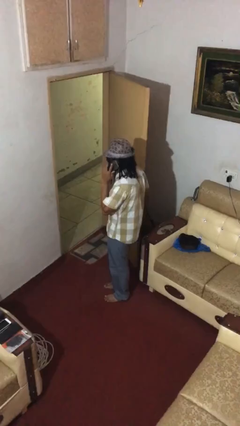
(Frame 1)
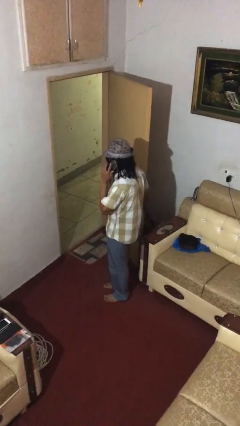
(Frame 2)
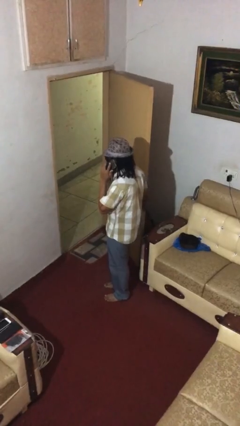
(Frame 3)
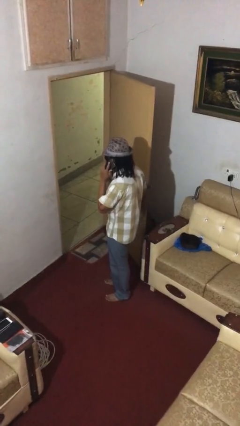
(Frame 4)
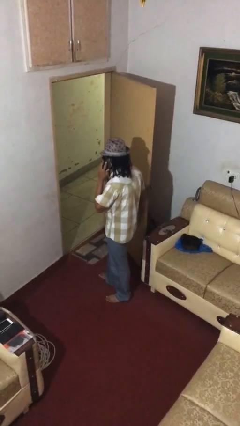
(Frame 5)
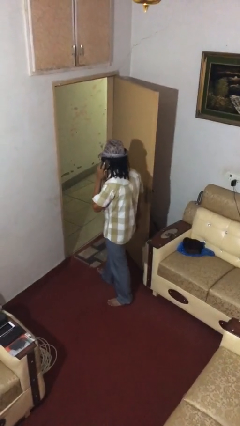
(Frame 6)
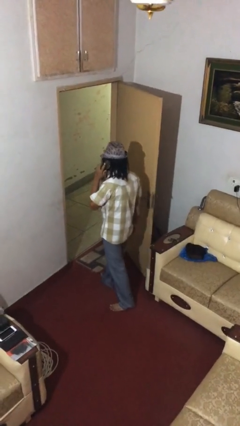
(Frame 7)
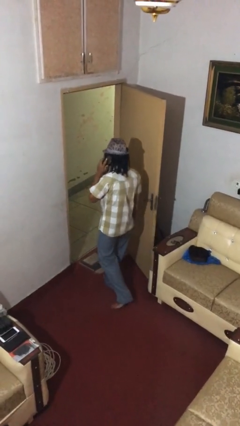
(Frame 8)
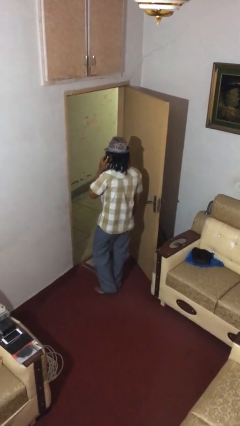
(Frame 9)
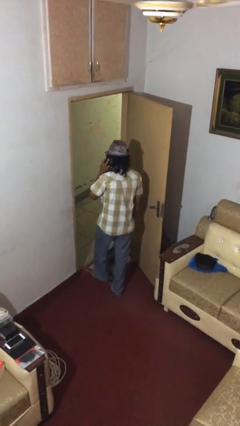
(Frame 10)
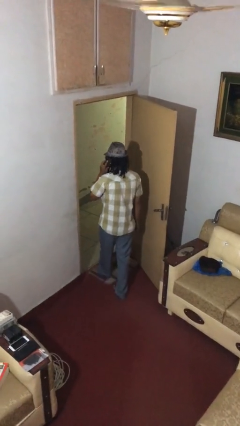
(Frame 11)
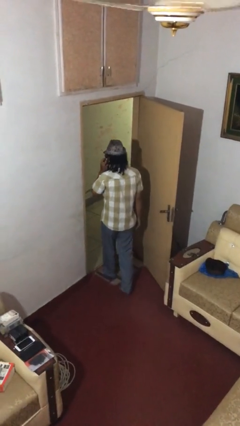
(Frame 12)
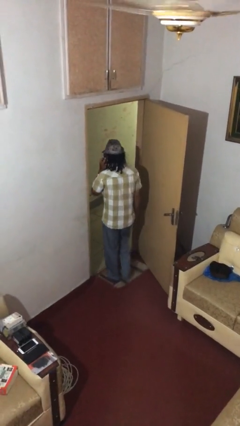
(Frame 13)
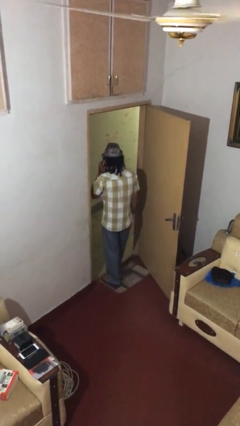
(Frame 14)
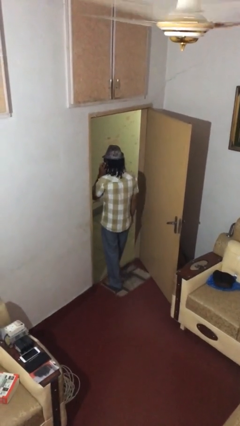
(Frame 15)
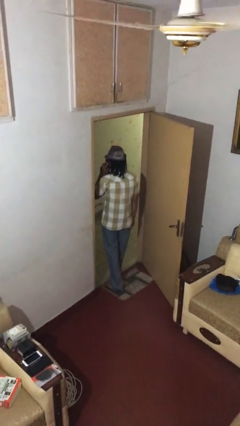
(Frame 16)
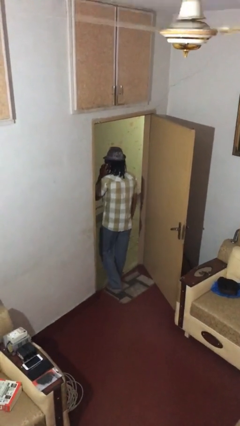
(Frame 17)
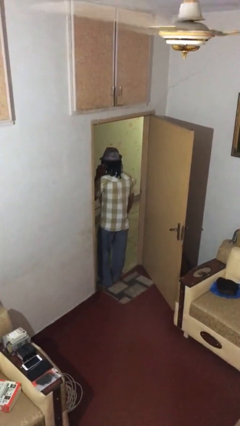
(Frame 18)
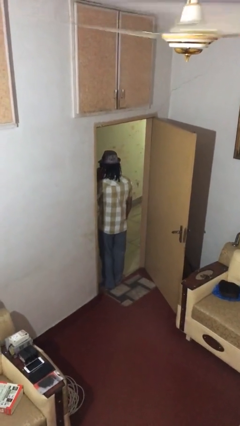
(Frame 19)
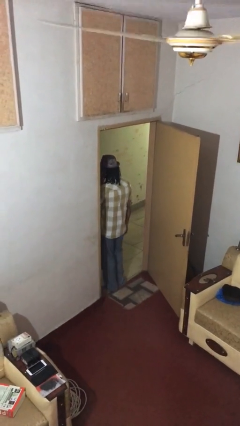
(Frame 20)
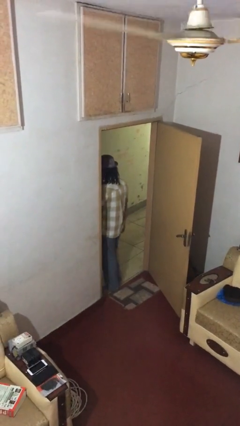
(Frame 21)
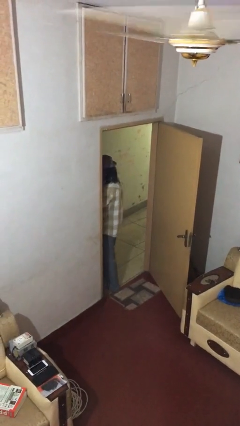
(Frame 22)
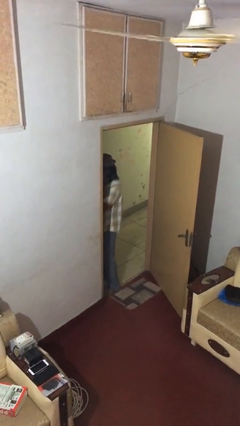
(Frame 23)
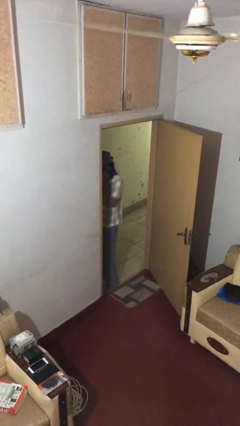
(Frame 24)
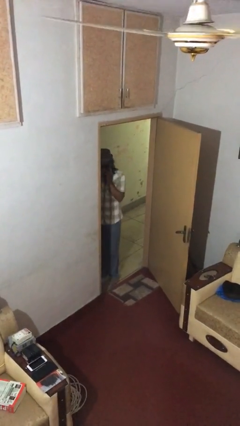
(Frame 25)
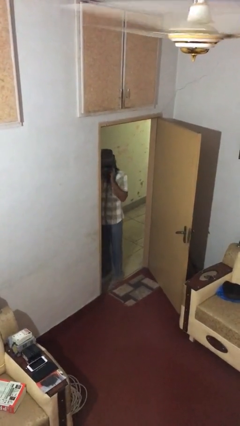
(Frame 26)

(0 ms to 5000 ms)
person exits scene through structure

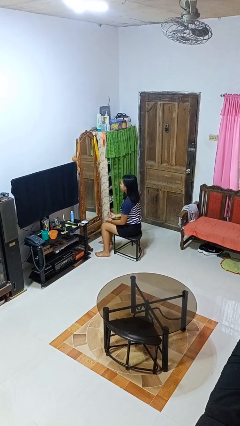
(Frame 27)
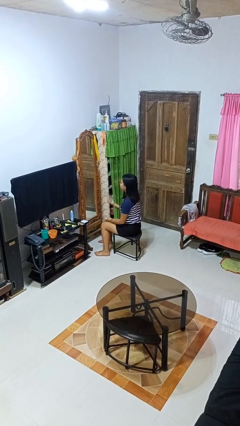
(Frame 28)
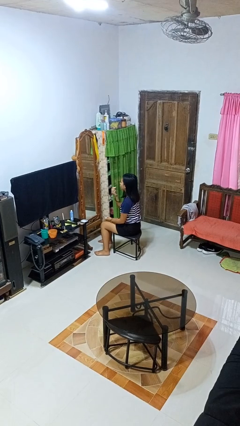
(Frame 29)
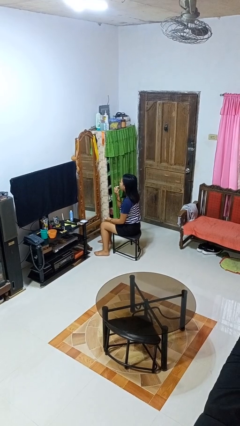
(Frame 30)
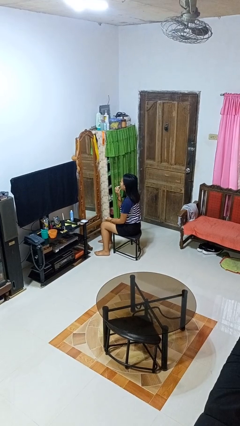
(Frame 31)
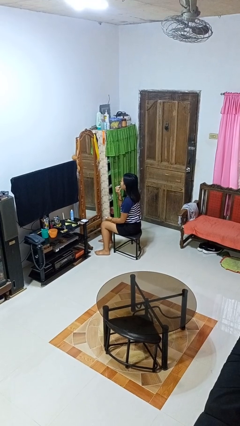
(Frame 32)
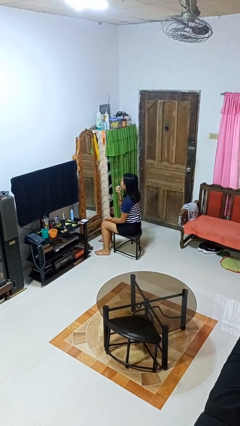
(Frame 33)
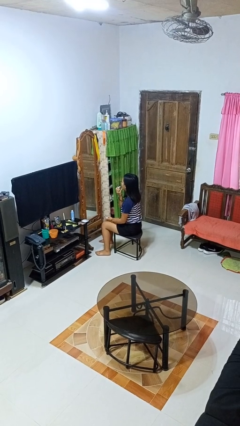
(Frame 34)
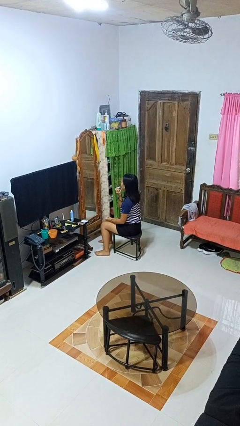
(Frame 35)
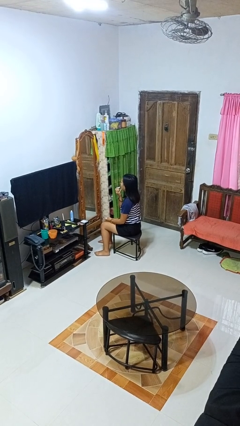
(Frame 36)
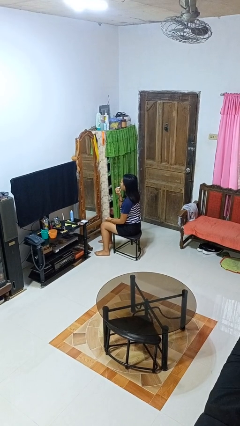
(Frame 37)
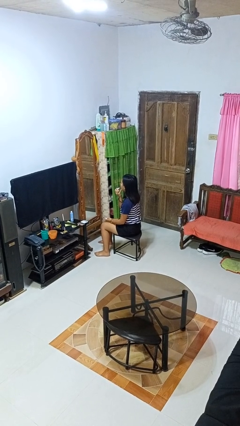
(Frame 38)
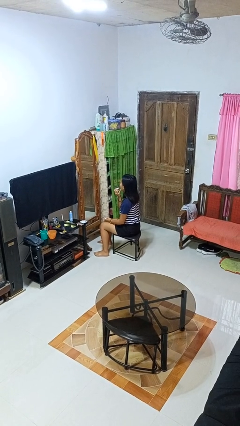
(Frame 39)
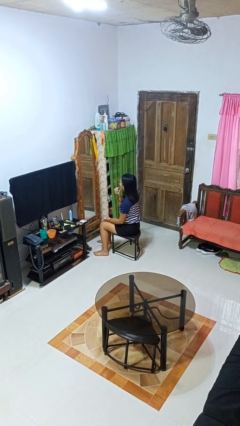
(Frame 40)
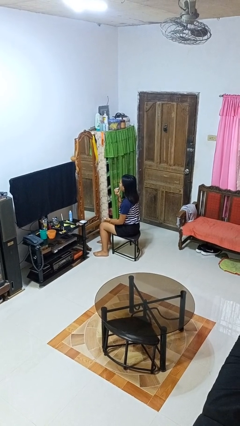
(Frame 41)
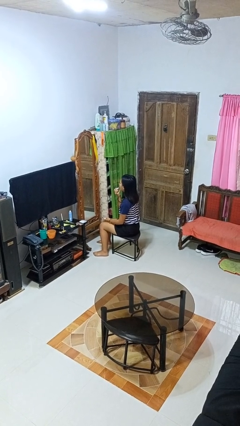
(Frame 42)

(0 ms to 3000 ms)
person applies lip makeup

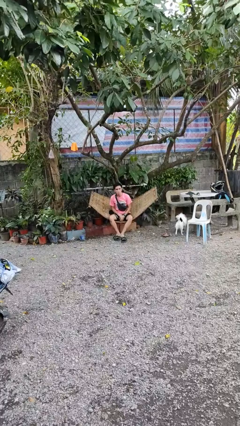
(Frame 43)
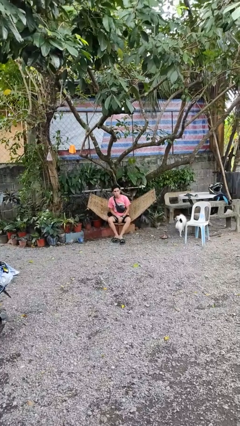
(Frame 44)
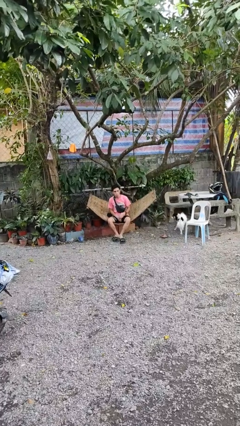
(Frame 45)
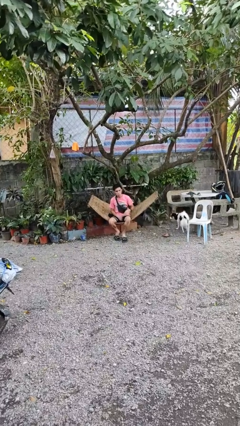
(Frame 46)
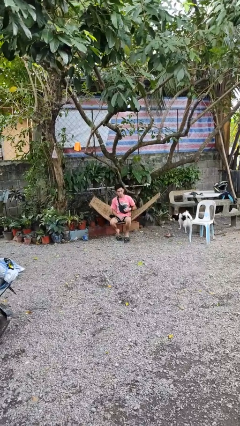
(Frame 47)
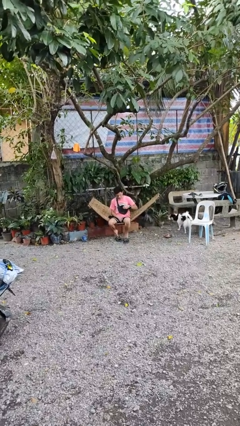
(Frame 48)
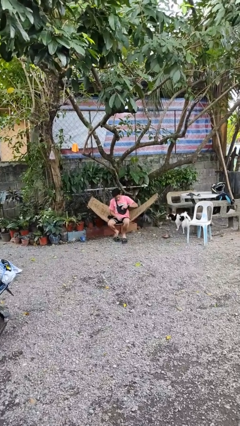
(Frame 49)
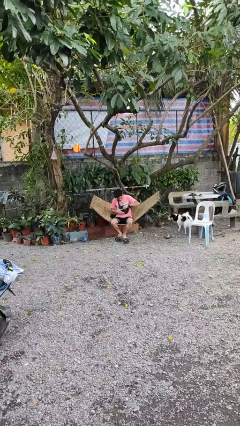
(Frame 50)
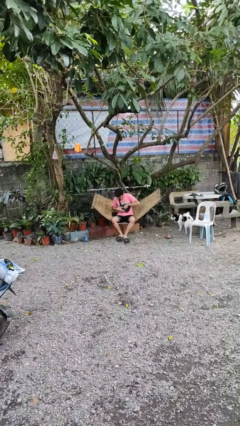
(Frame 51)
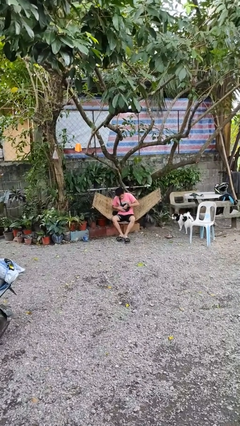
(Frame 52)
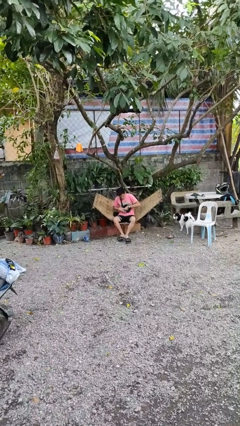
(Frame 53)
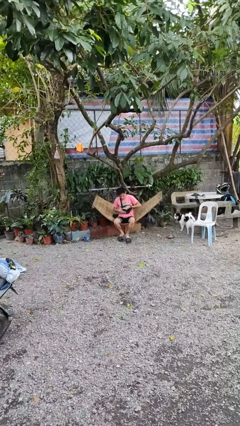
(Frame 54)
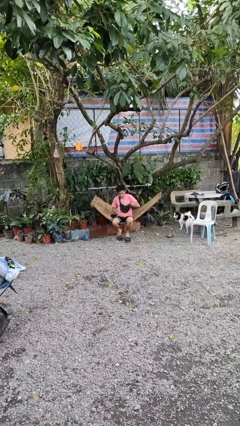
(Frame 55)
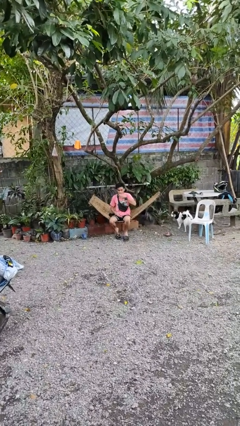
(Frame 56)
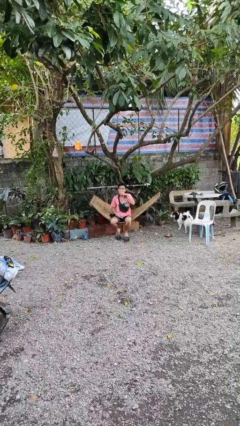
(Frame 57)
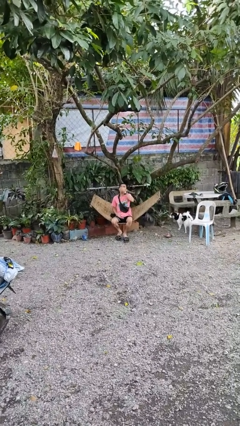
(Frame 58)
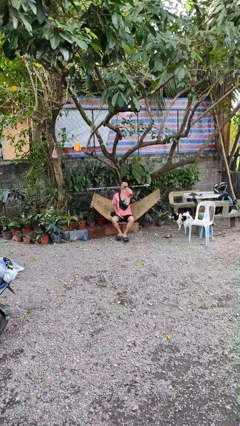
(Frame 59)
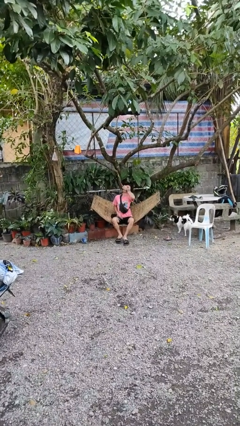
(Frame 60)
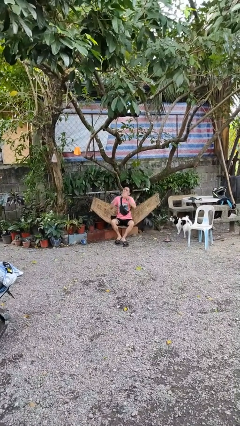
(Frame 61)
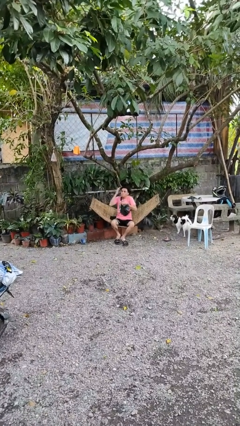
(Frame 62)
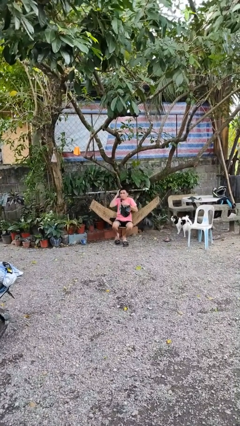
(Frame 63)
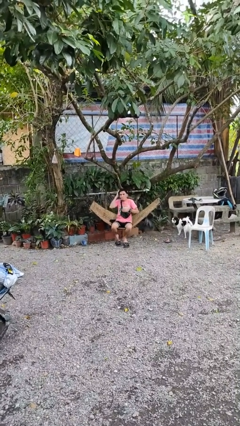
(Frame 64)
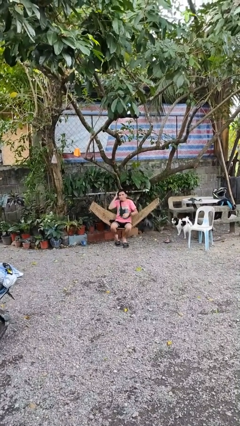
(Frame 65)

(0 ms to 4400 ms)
person eats snack from bag

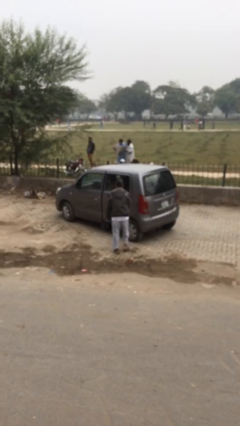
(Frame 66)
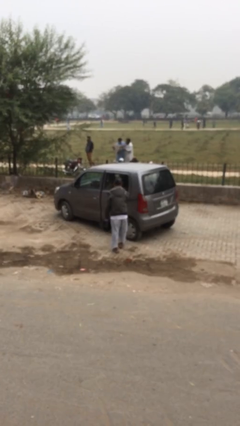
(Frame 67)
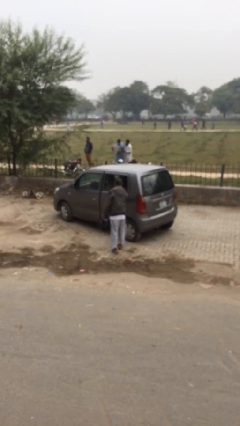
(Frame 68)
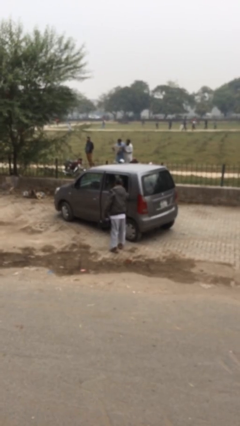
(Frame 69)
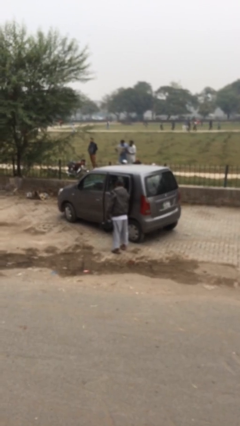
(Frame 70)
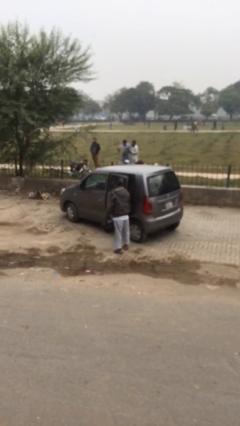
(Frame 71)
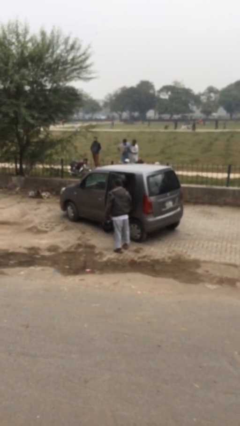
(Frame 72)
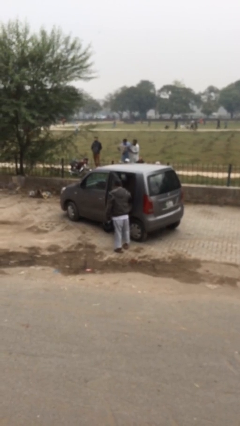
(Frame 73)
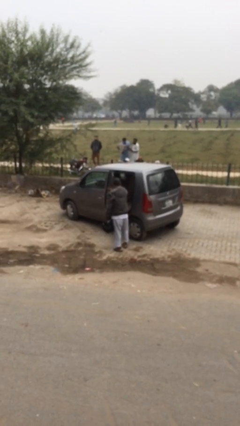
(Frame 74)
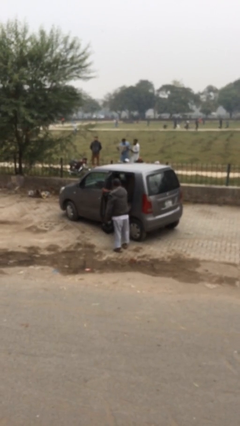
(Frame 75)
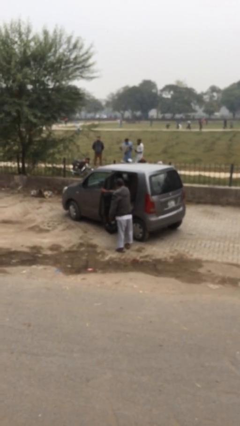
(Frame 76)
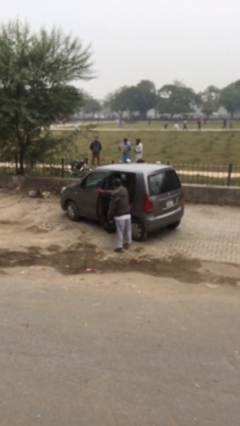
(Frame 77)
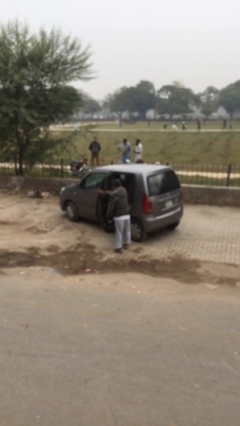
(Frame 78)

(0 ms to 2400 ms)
person opens car door

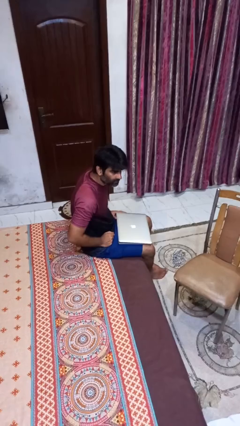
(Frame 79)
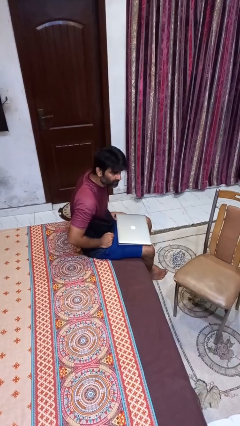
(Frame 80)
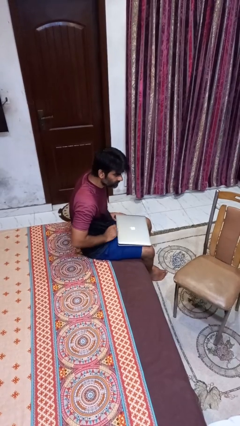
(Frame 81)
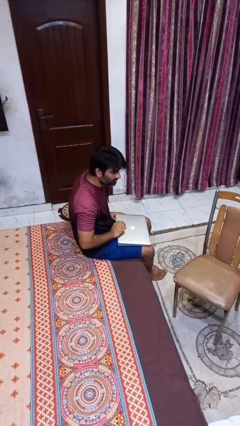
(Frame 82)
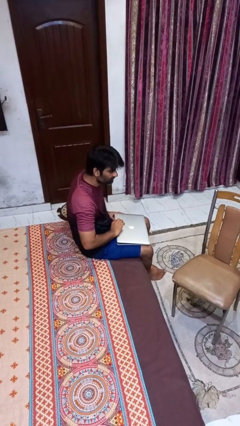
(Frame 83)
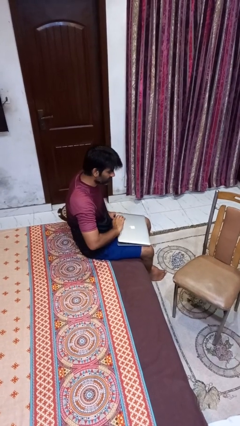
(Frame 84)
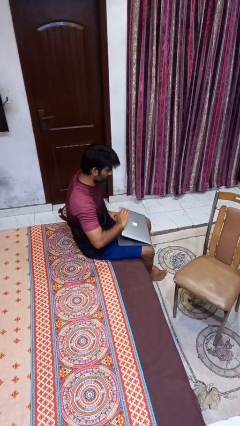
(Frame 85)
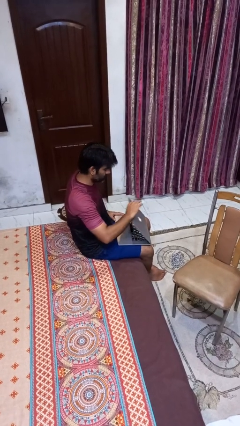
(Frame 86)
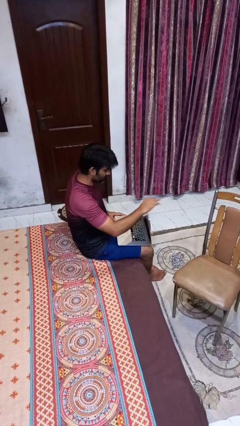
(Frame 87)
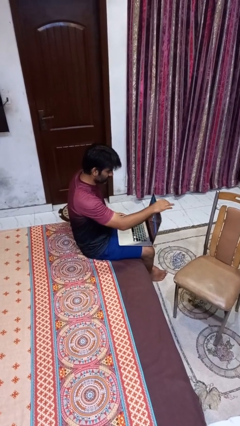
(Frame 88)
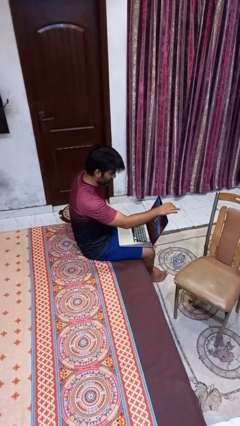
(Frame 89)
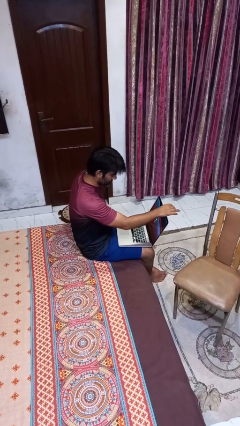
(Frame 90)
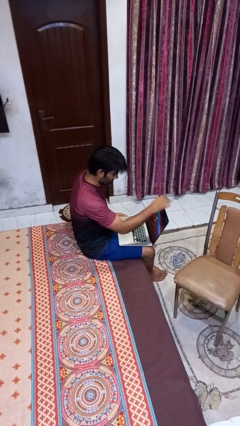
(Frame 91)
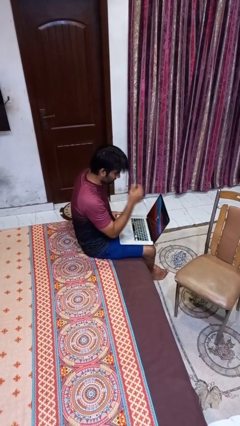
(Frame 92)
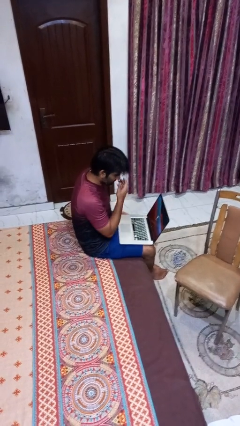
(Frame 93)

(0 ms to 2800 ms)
person opens laptop
